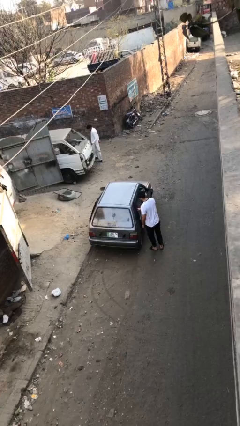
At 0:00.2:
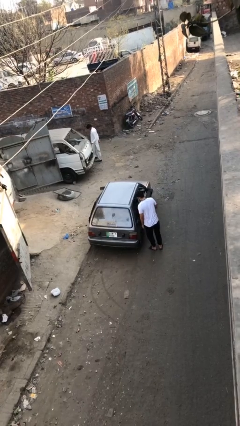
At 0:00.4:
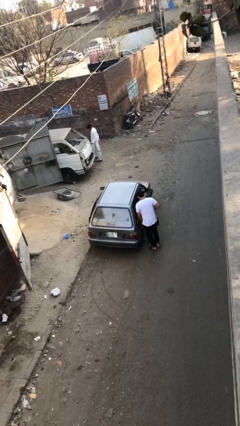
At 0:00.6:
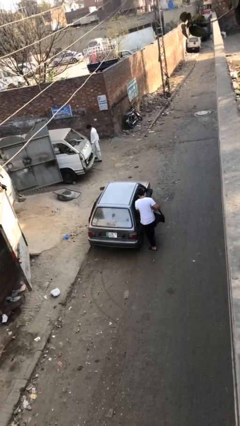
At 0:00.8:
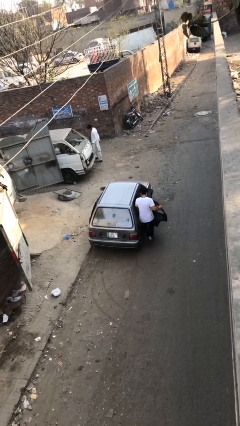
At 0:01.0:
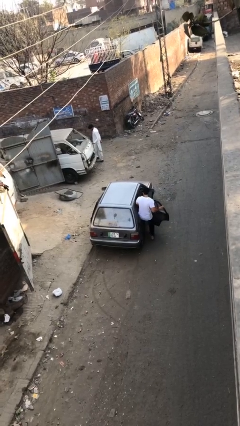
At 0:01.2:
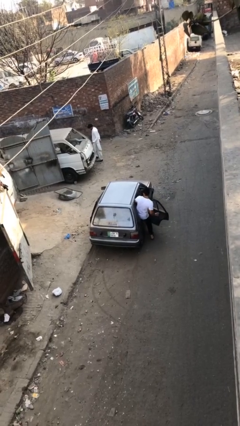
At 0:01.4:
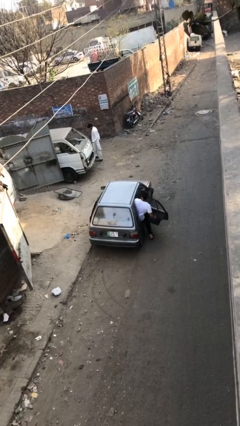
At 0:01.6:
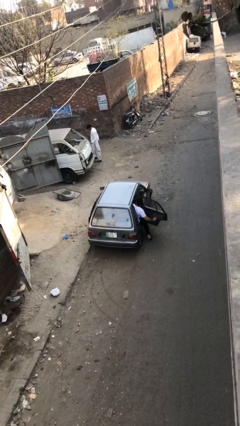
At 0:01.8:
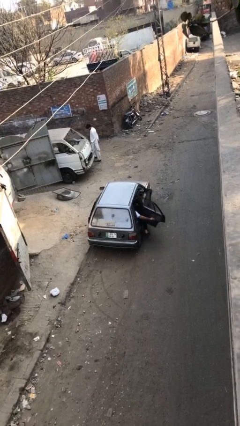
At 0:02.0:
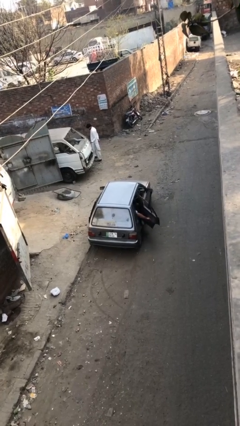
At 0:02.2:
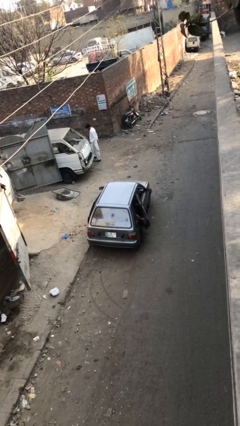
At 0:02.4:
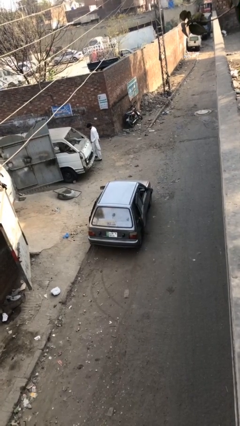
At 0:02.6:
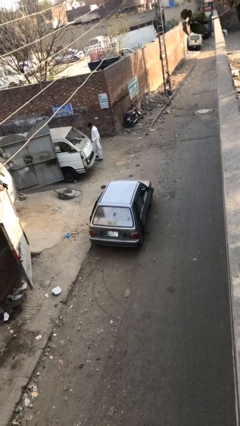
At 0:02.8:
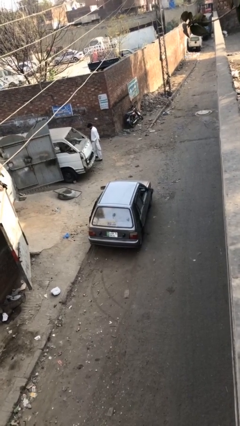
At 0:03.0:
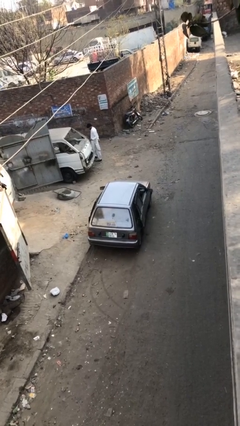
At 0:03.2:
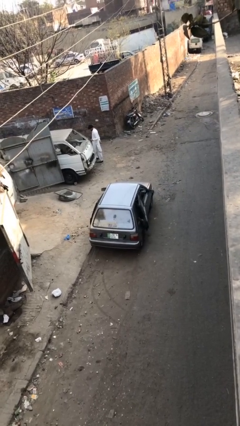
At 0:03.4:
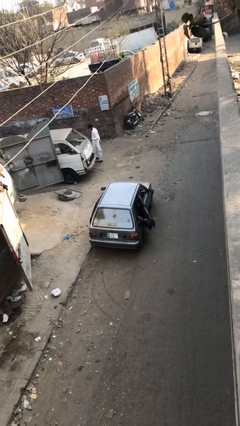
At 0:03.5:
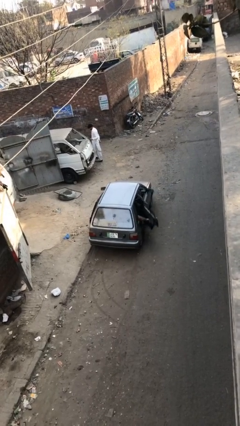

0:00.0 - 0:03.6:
car picks up person

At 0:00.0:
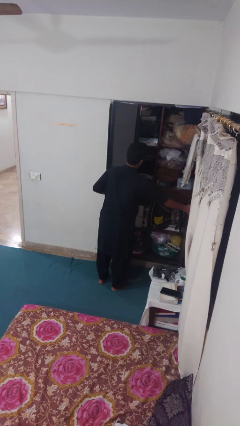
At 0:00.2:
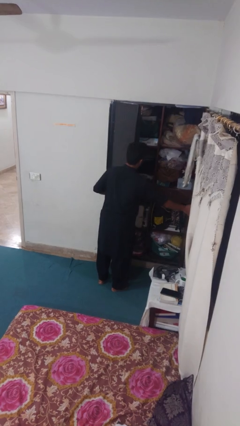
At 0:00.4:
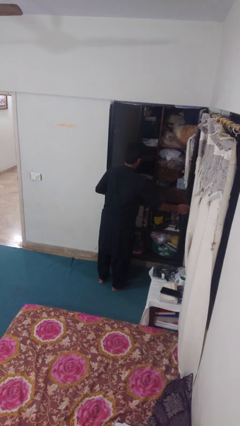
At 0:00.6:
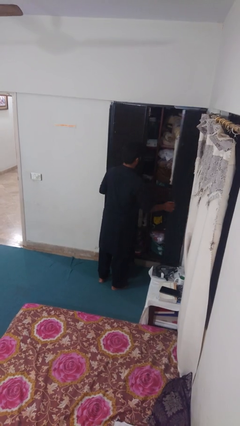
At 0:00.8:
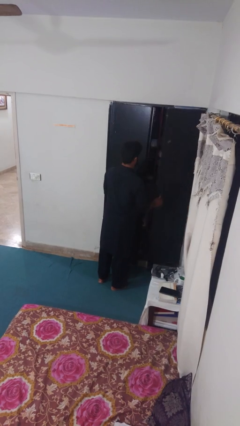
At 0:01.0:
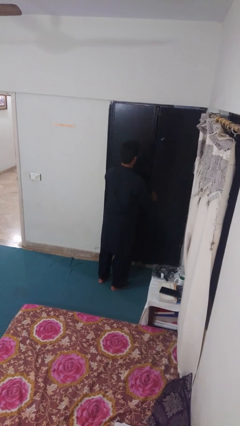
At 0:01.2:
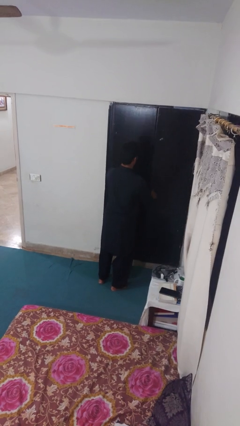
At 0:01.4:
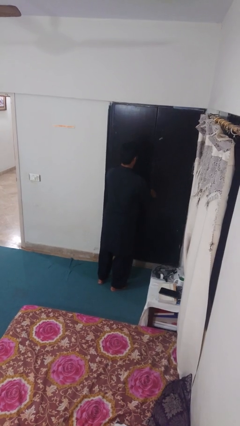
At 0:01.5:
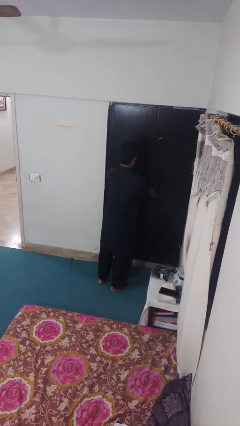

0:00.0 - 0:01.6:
person closes closet door

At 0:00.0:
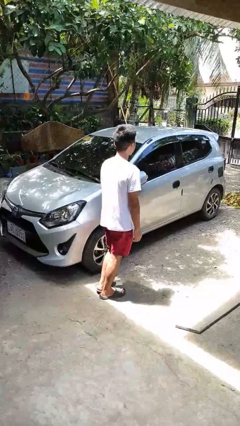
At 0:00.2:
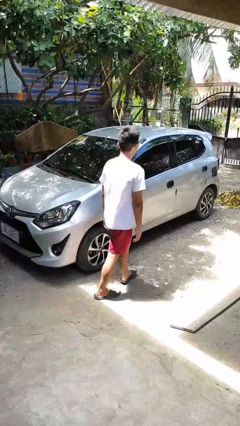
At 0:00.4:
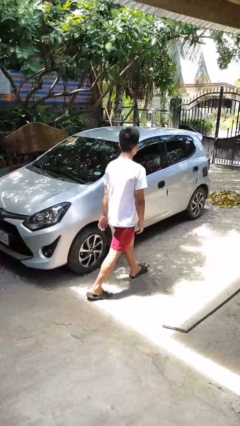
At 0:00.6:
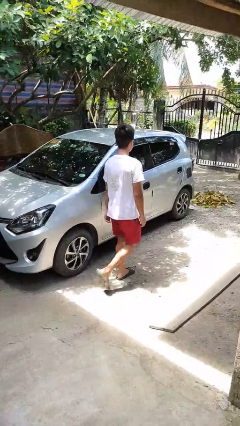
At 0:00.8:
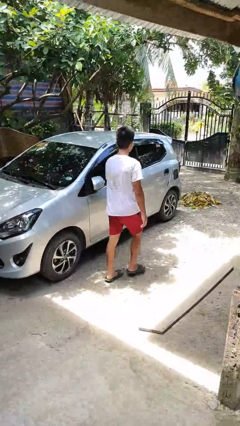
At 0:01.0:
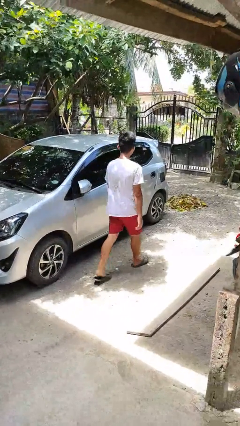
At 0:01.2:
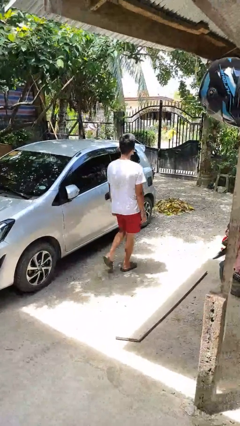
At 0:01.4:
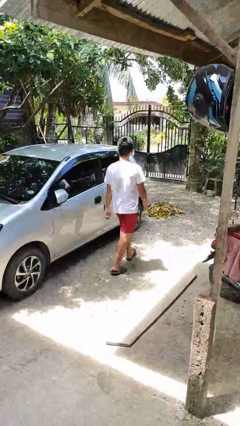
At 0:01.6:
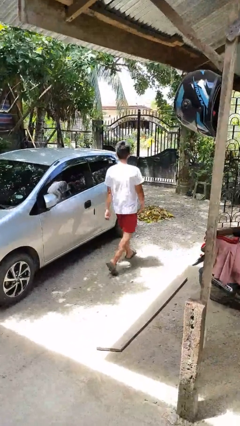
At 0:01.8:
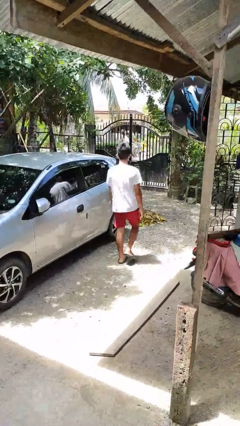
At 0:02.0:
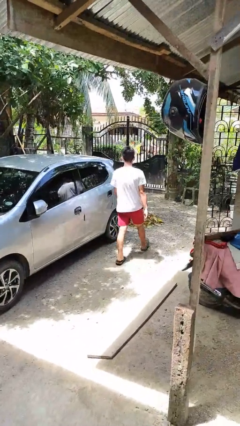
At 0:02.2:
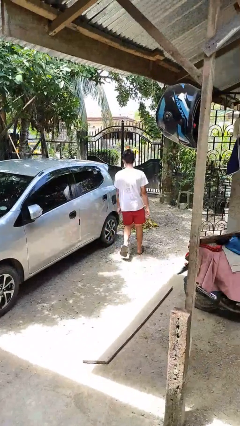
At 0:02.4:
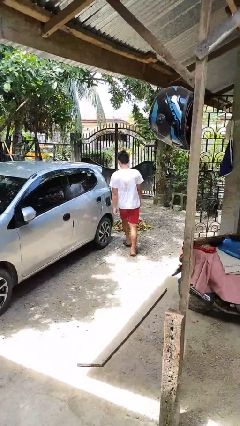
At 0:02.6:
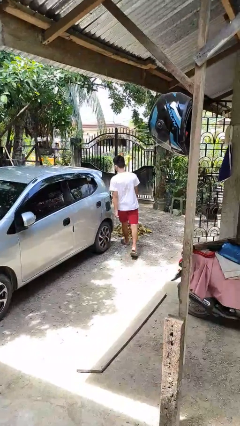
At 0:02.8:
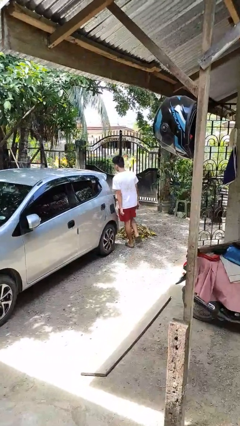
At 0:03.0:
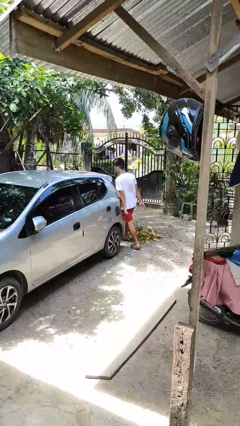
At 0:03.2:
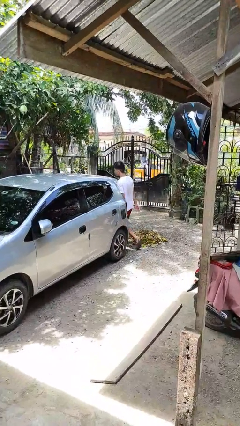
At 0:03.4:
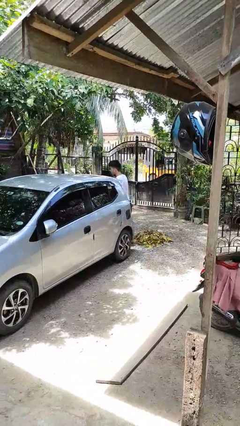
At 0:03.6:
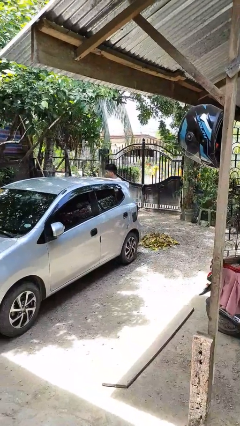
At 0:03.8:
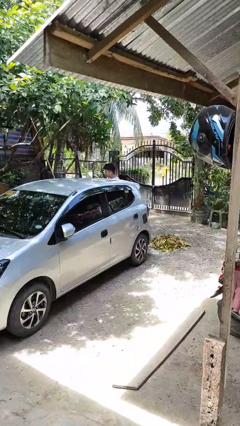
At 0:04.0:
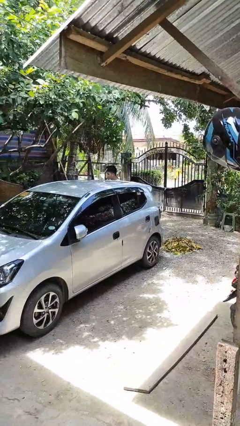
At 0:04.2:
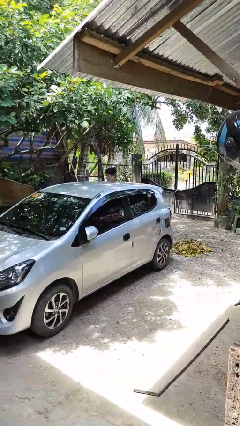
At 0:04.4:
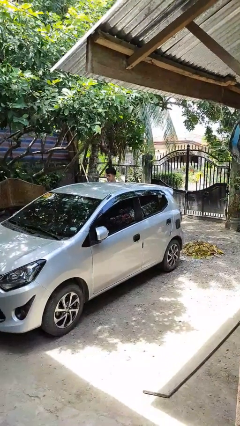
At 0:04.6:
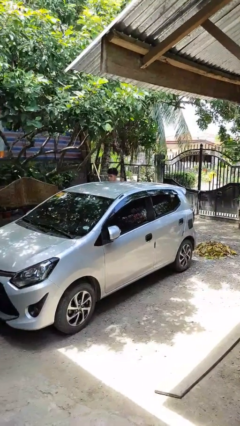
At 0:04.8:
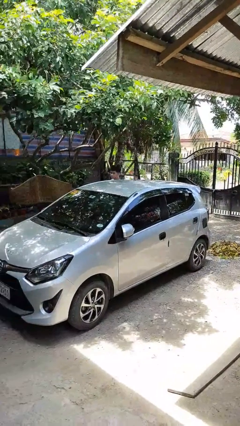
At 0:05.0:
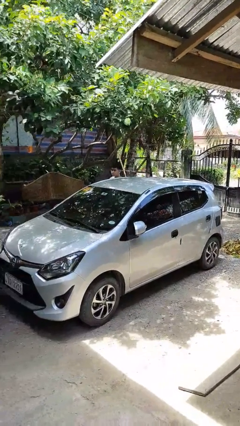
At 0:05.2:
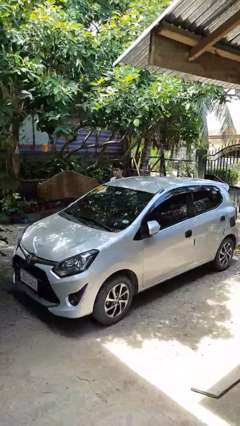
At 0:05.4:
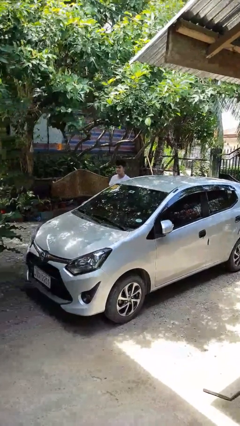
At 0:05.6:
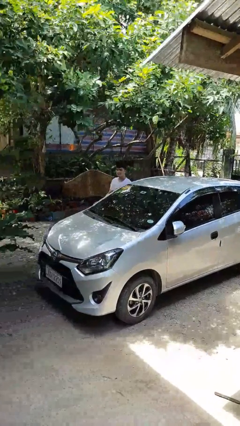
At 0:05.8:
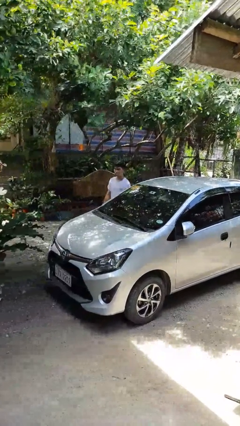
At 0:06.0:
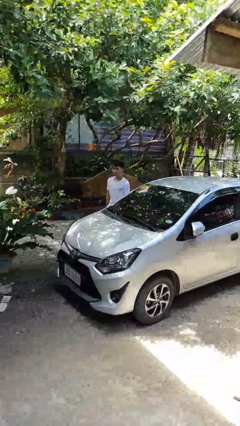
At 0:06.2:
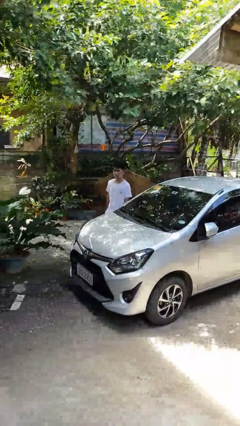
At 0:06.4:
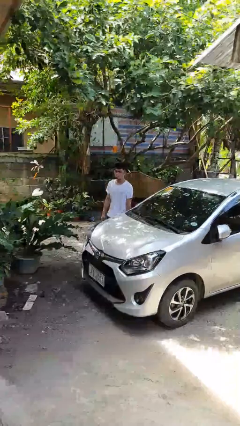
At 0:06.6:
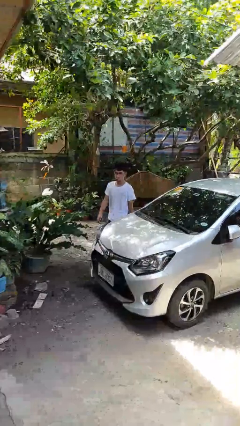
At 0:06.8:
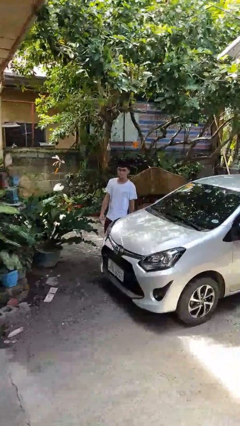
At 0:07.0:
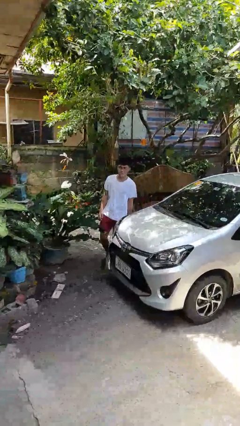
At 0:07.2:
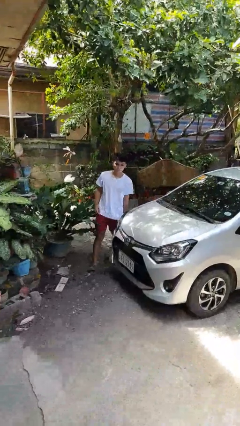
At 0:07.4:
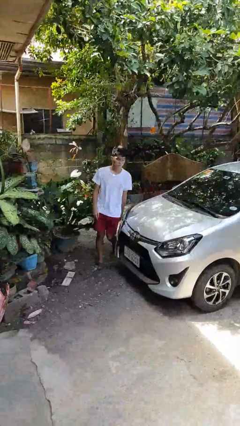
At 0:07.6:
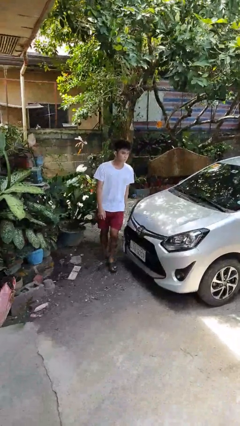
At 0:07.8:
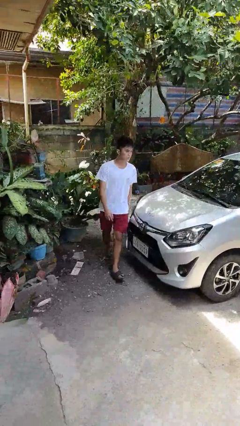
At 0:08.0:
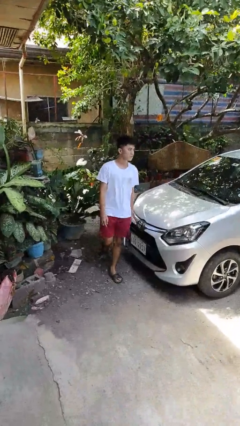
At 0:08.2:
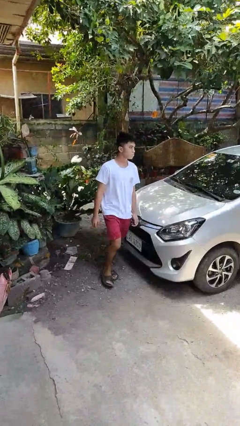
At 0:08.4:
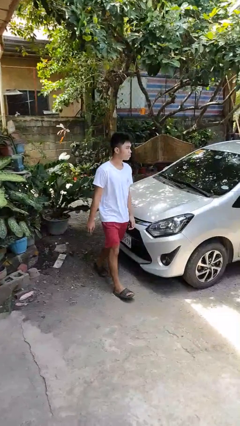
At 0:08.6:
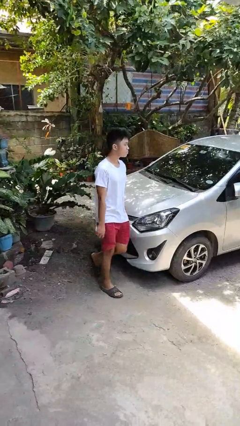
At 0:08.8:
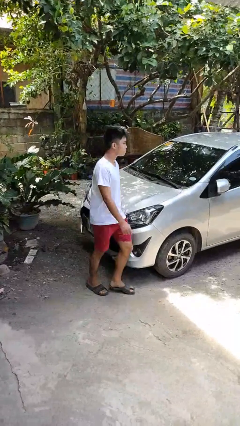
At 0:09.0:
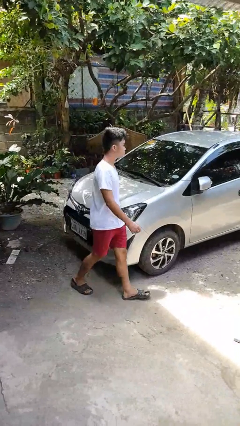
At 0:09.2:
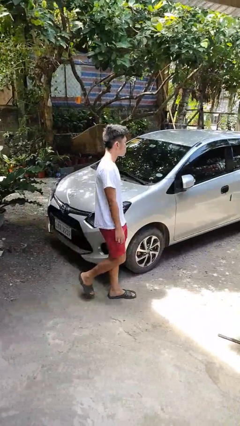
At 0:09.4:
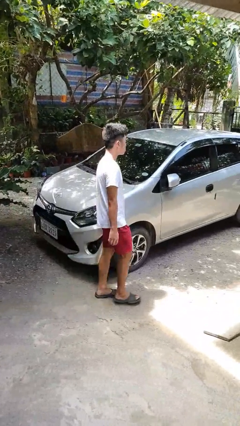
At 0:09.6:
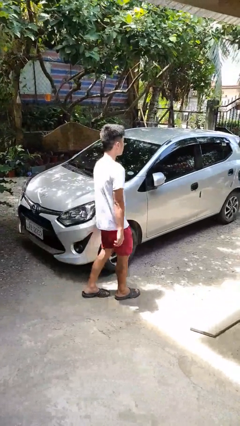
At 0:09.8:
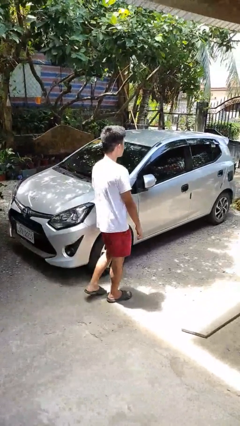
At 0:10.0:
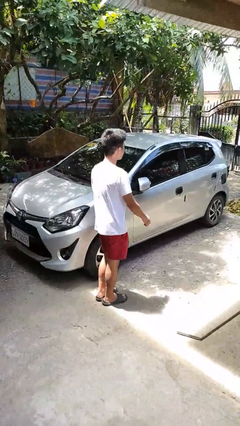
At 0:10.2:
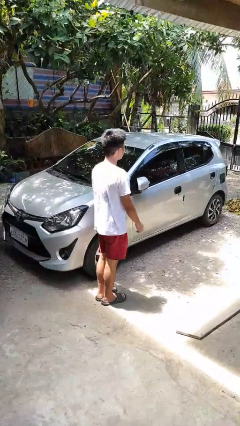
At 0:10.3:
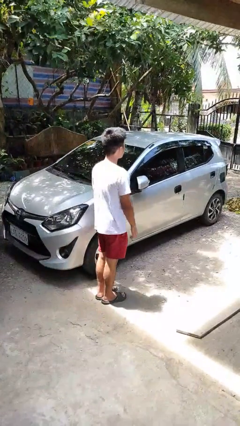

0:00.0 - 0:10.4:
person walks around car

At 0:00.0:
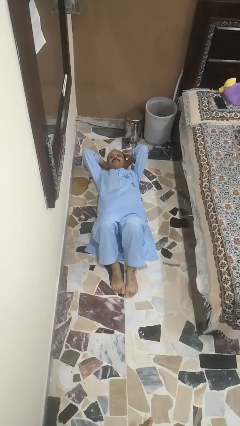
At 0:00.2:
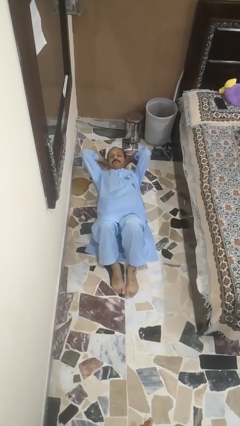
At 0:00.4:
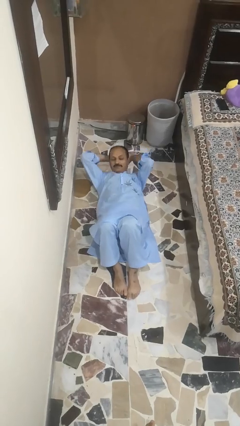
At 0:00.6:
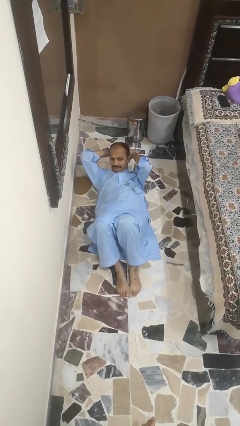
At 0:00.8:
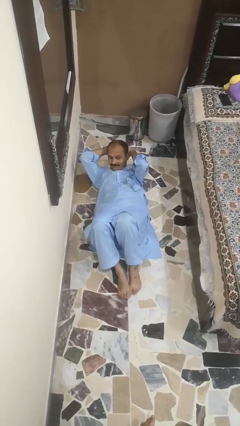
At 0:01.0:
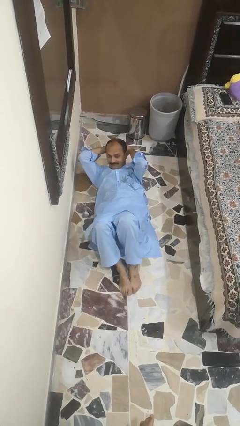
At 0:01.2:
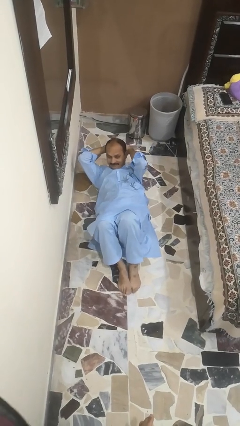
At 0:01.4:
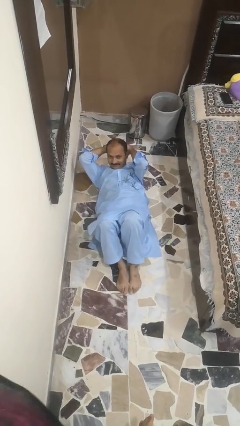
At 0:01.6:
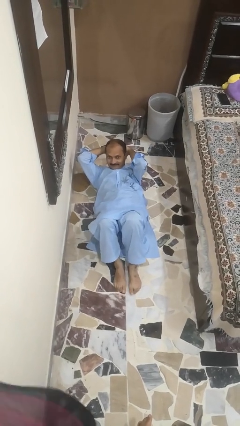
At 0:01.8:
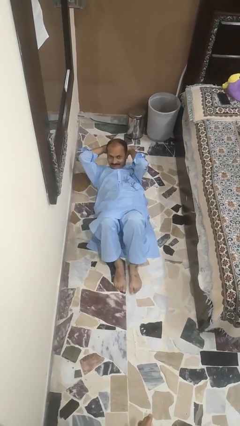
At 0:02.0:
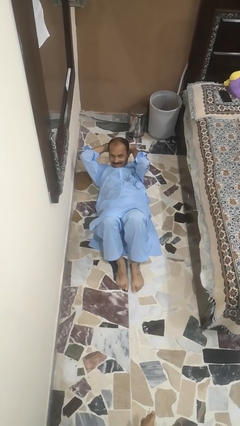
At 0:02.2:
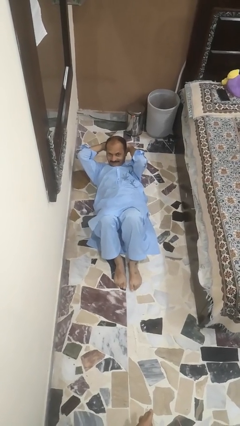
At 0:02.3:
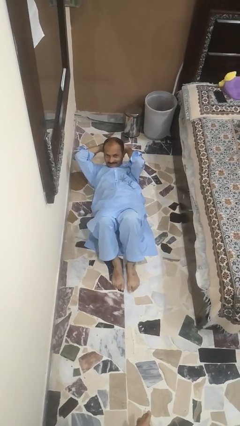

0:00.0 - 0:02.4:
person exercises with situp
